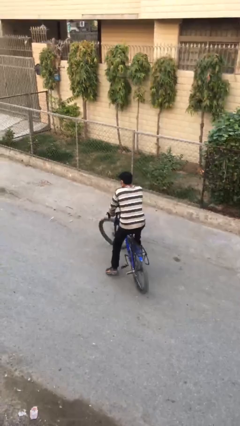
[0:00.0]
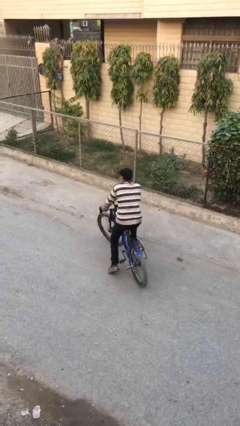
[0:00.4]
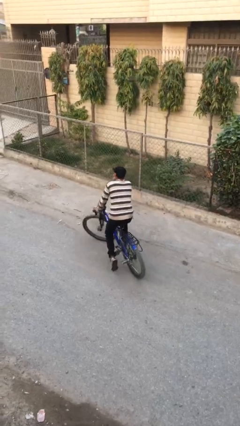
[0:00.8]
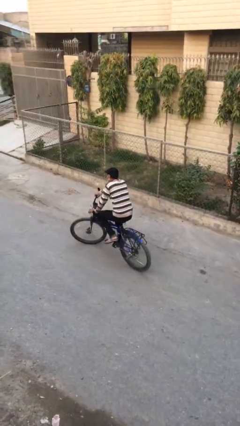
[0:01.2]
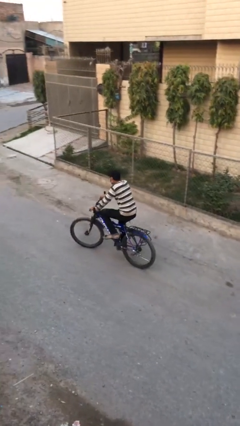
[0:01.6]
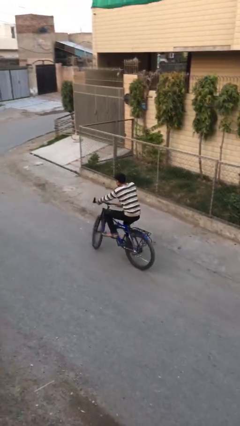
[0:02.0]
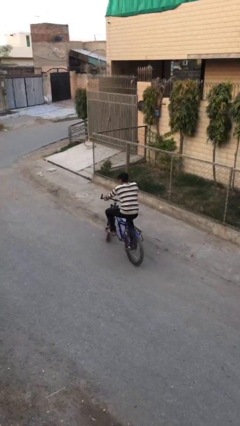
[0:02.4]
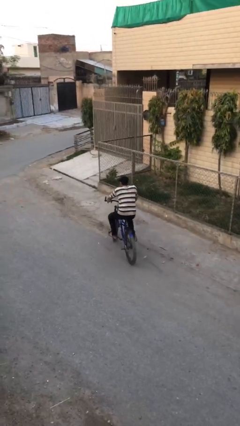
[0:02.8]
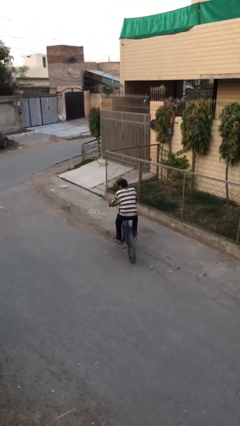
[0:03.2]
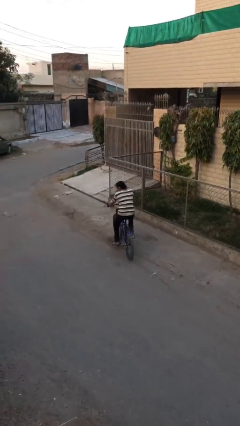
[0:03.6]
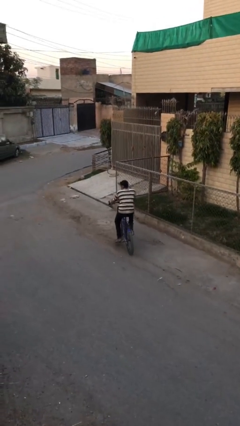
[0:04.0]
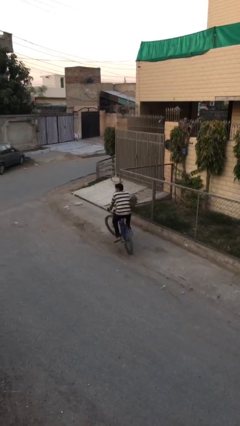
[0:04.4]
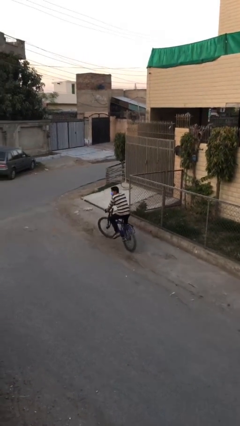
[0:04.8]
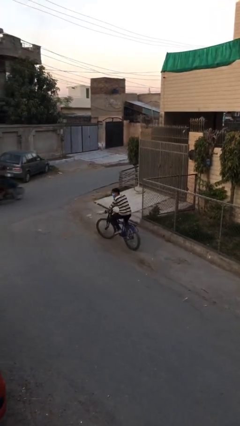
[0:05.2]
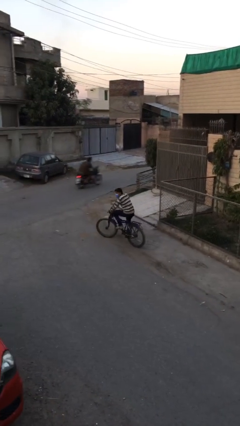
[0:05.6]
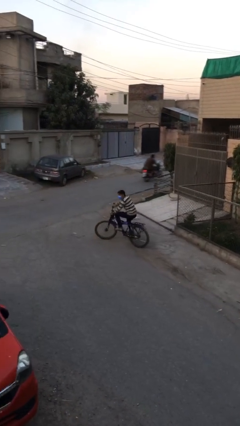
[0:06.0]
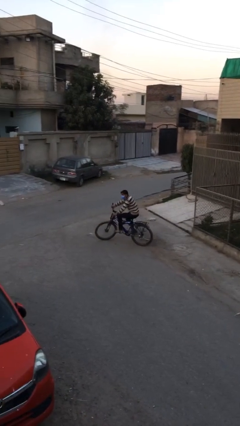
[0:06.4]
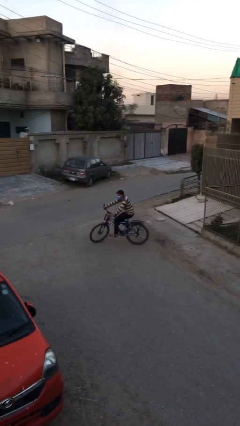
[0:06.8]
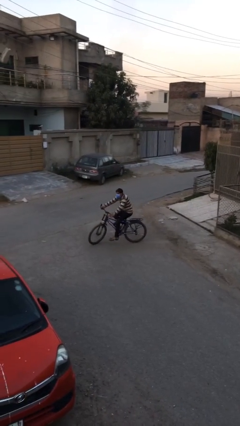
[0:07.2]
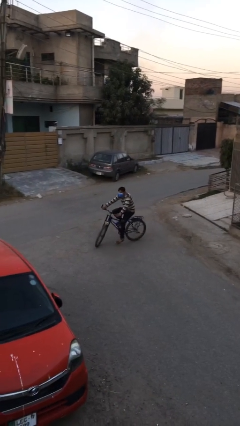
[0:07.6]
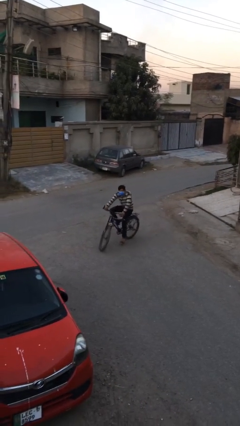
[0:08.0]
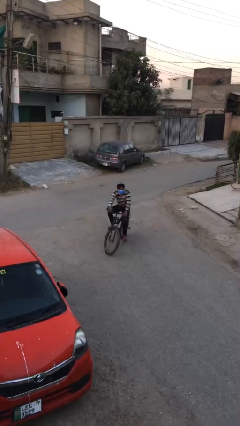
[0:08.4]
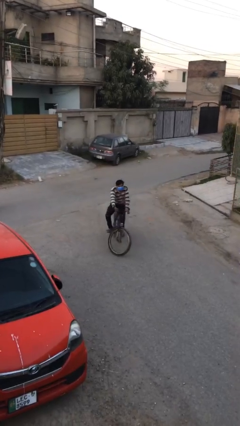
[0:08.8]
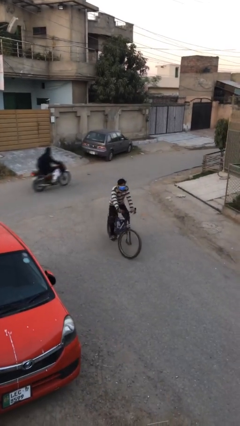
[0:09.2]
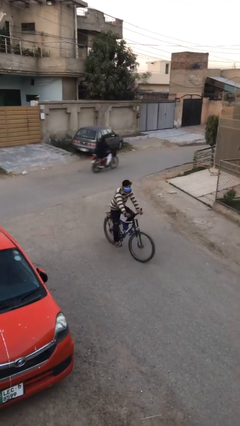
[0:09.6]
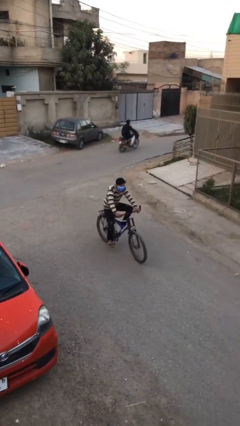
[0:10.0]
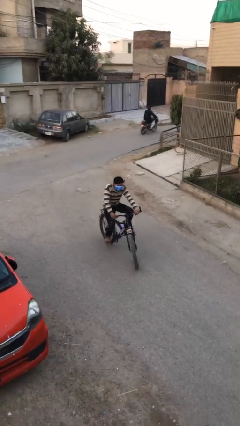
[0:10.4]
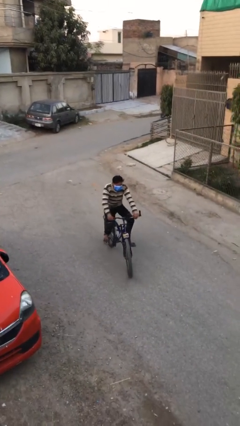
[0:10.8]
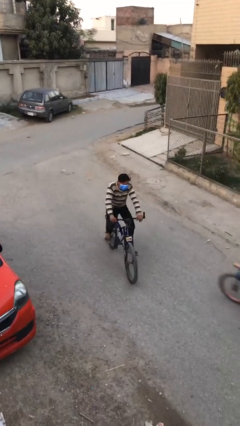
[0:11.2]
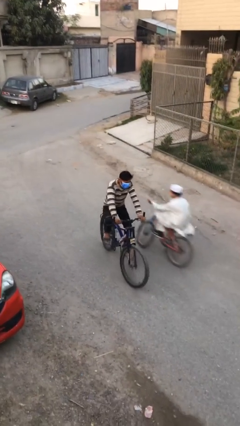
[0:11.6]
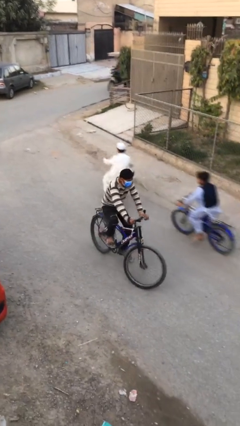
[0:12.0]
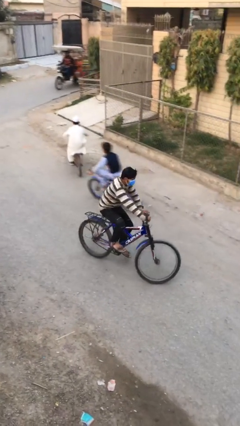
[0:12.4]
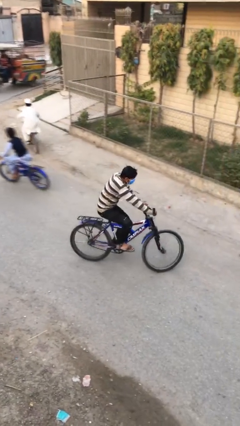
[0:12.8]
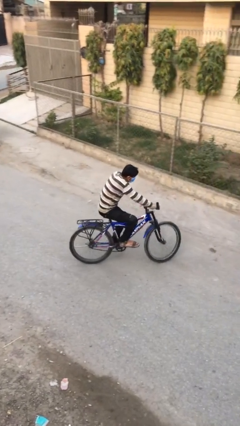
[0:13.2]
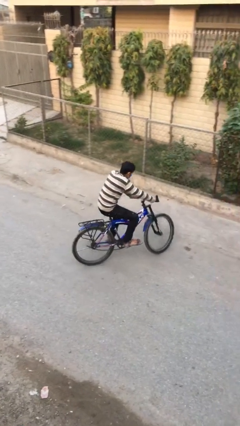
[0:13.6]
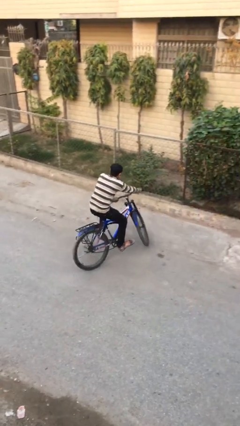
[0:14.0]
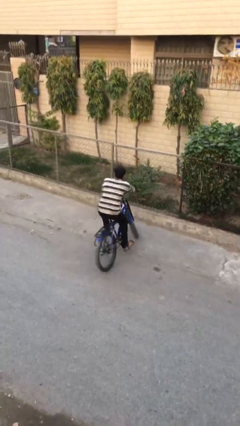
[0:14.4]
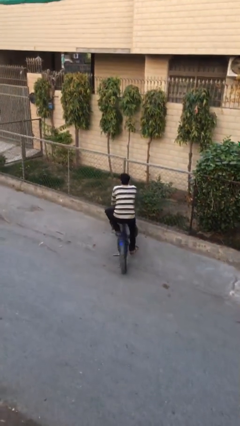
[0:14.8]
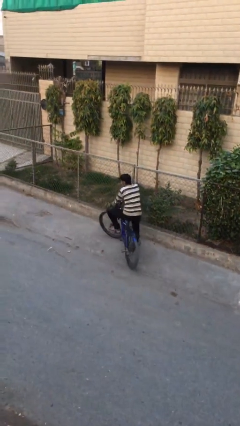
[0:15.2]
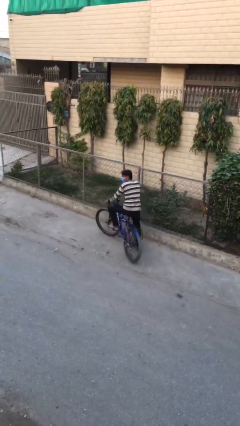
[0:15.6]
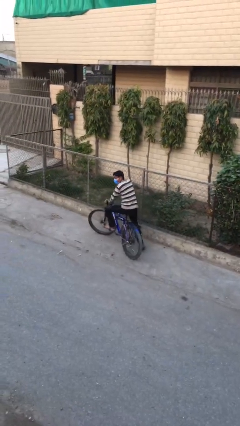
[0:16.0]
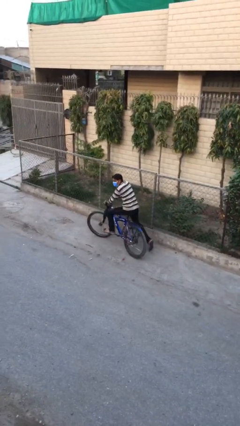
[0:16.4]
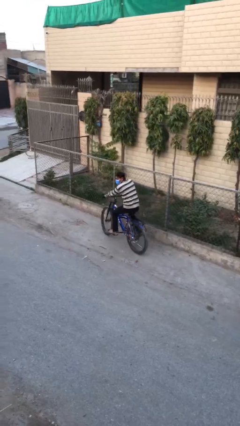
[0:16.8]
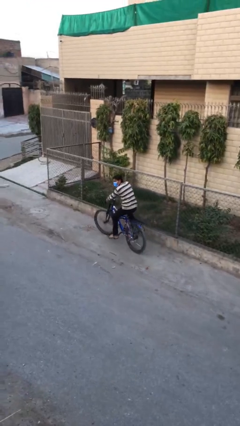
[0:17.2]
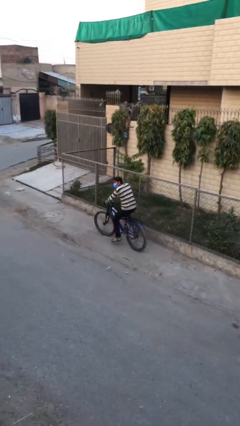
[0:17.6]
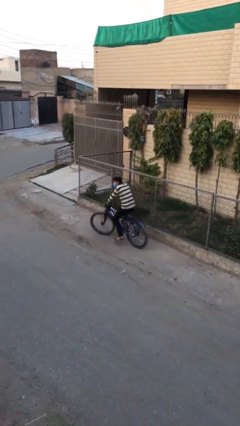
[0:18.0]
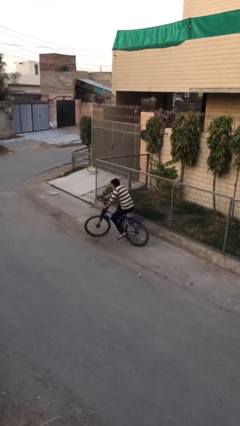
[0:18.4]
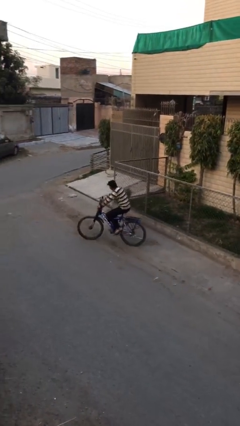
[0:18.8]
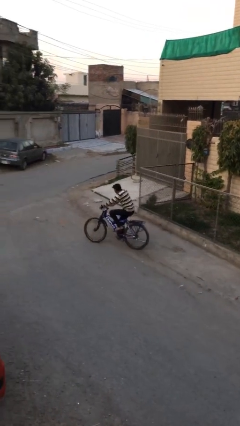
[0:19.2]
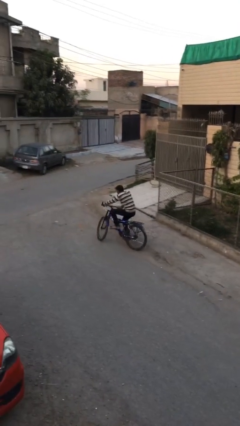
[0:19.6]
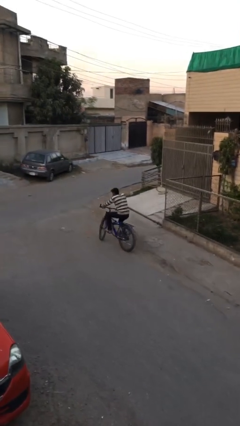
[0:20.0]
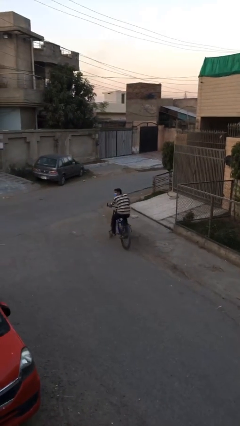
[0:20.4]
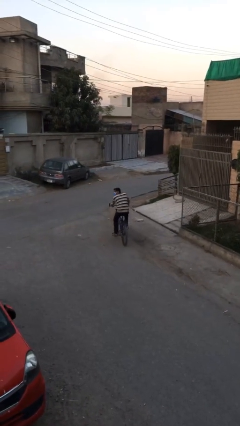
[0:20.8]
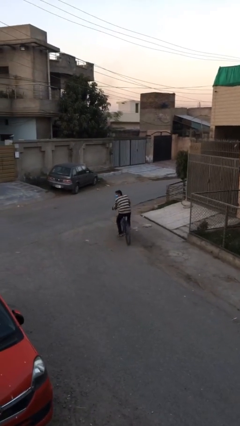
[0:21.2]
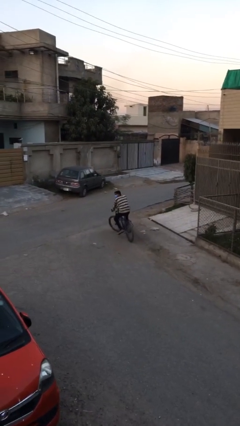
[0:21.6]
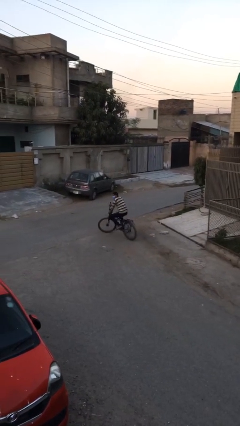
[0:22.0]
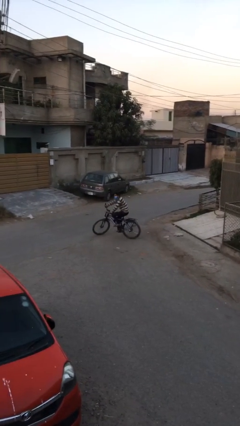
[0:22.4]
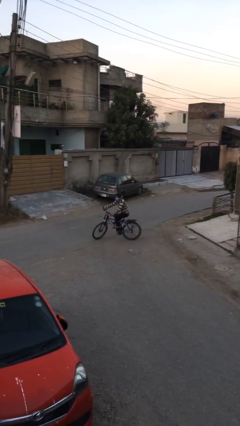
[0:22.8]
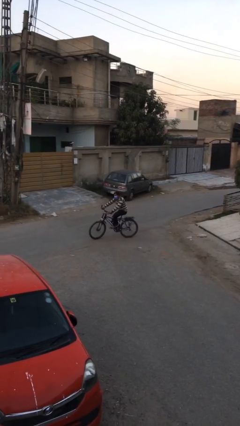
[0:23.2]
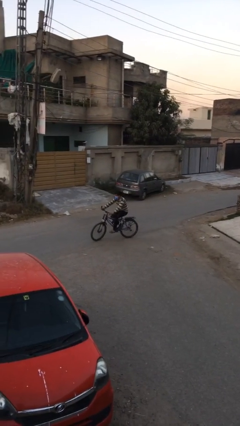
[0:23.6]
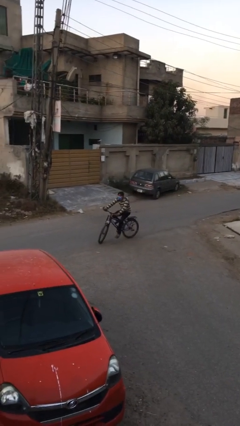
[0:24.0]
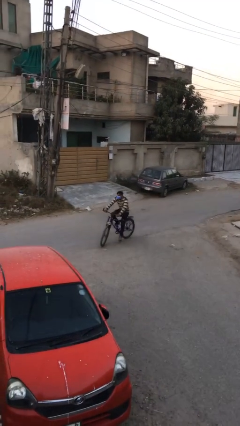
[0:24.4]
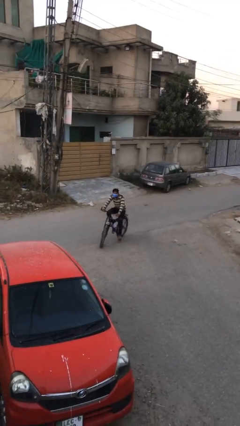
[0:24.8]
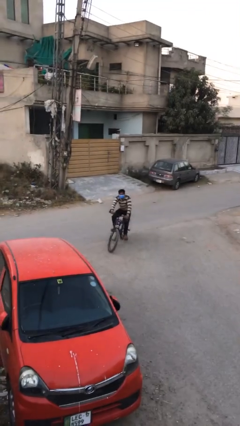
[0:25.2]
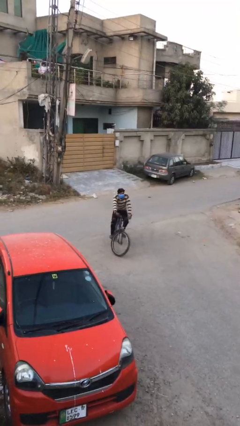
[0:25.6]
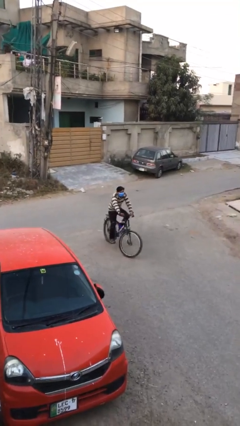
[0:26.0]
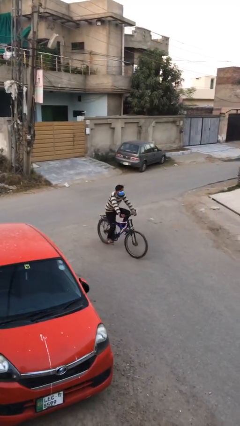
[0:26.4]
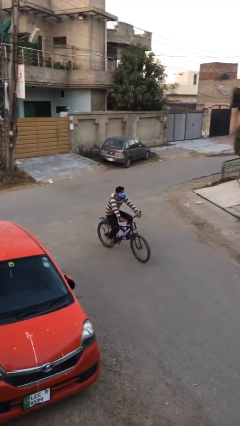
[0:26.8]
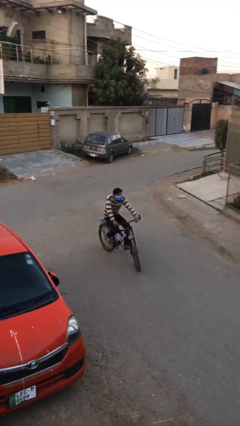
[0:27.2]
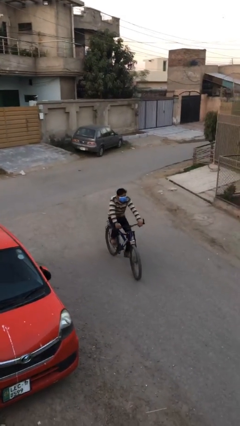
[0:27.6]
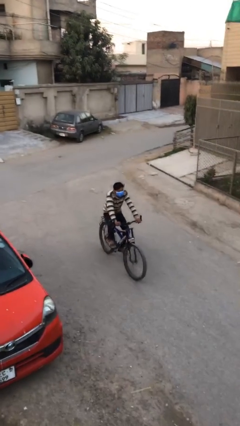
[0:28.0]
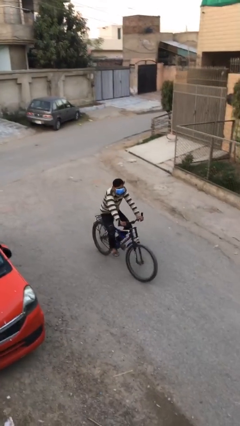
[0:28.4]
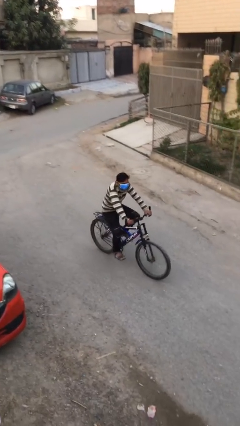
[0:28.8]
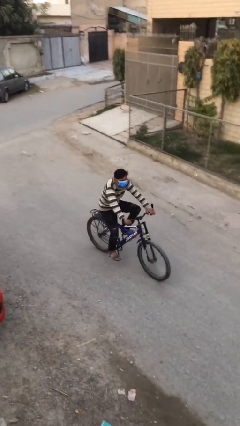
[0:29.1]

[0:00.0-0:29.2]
person rides bicycle

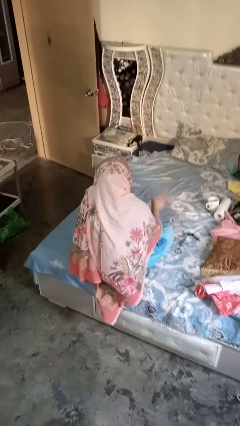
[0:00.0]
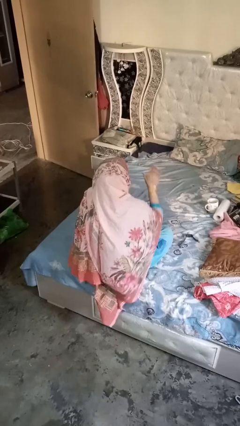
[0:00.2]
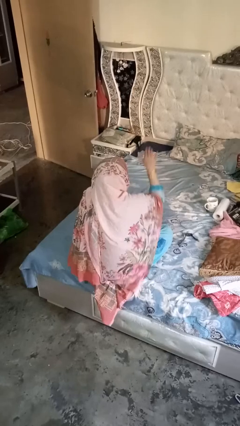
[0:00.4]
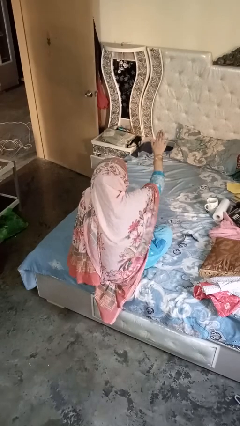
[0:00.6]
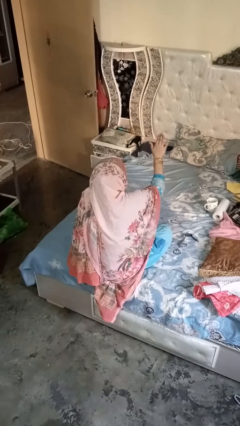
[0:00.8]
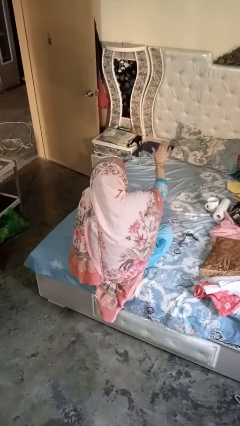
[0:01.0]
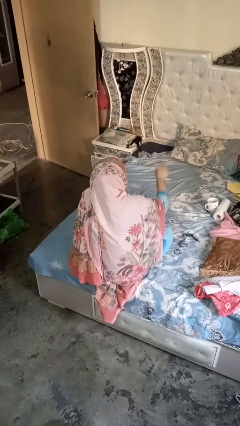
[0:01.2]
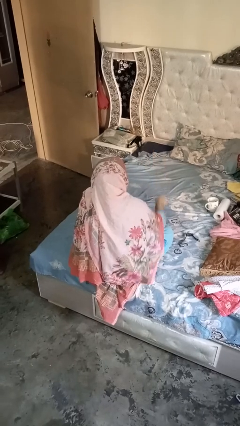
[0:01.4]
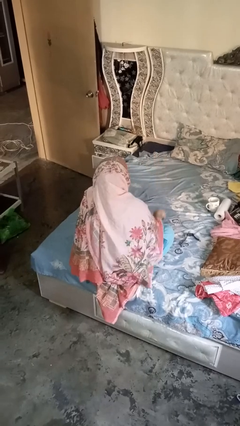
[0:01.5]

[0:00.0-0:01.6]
person gestures stop

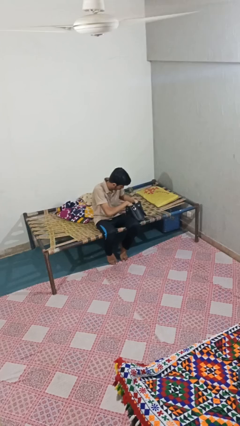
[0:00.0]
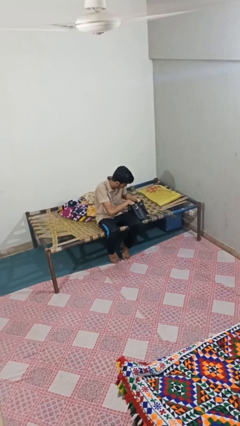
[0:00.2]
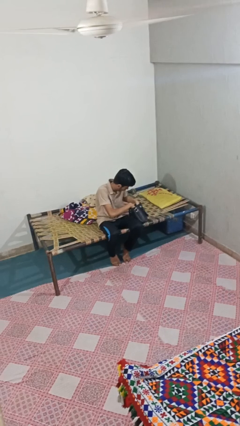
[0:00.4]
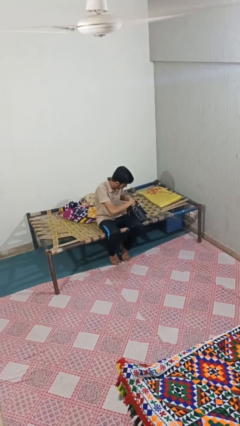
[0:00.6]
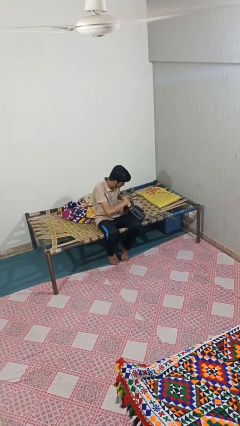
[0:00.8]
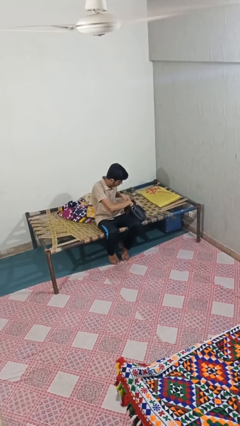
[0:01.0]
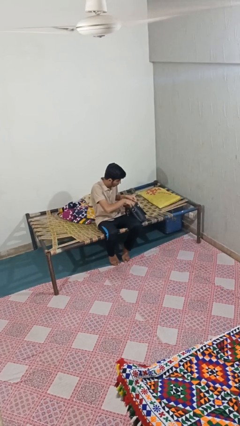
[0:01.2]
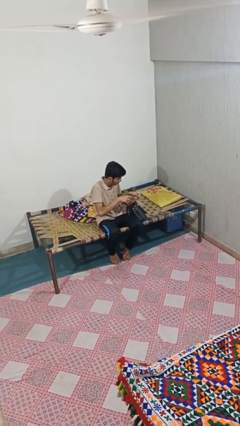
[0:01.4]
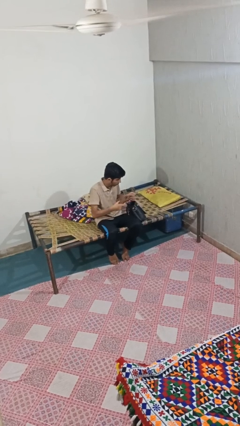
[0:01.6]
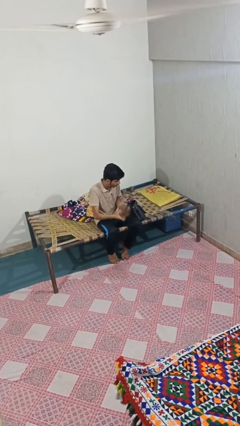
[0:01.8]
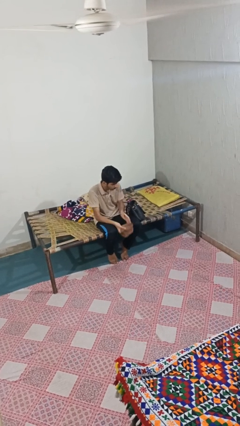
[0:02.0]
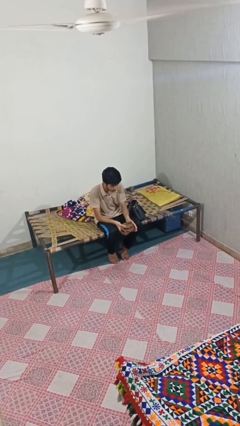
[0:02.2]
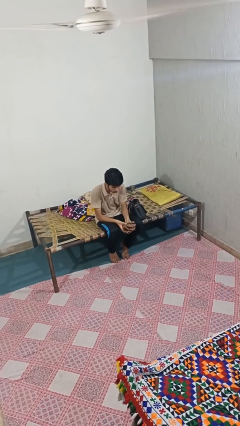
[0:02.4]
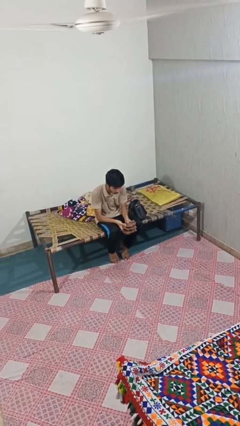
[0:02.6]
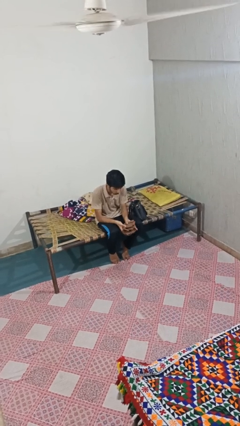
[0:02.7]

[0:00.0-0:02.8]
person takes object from purse
